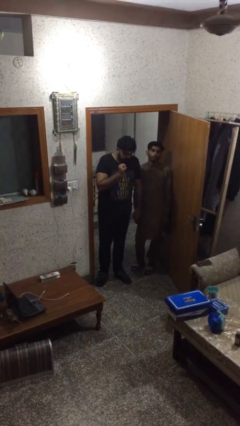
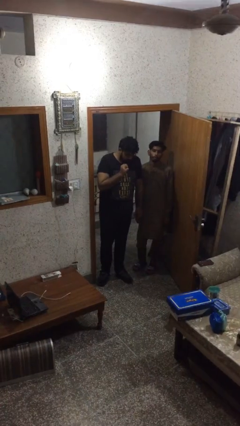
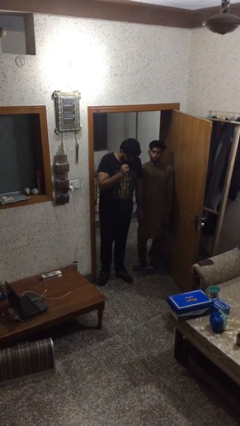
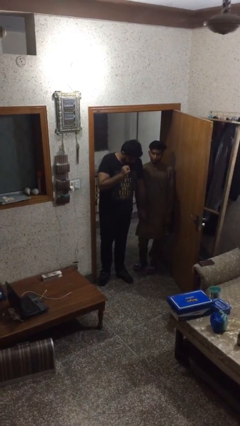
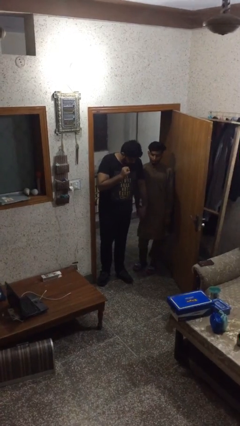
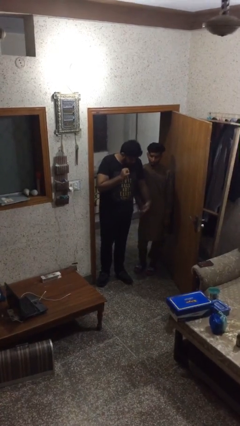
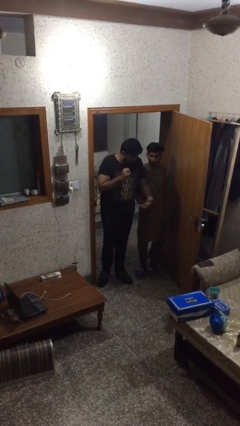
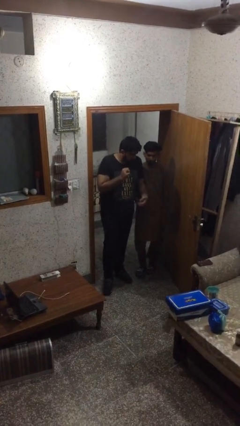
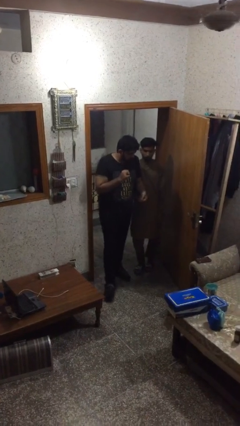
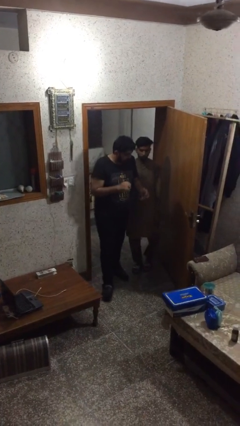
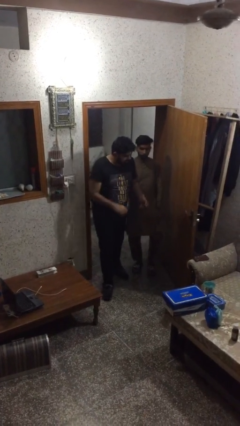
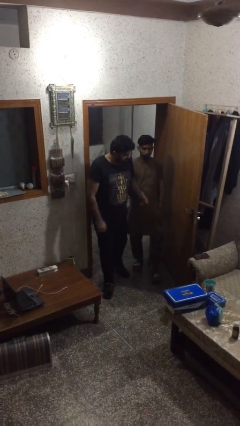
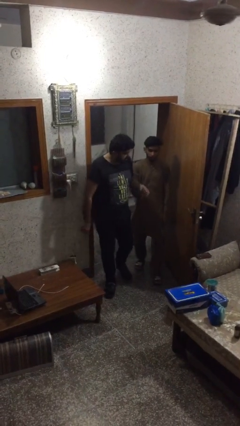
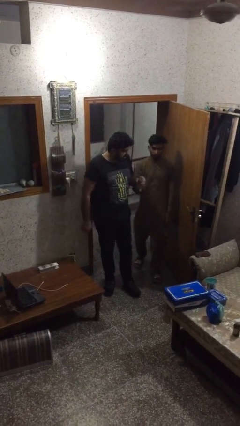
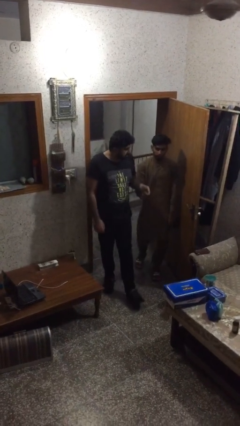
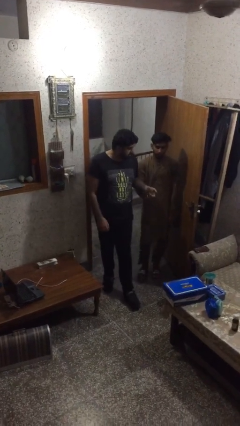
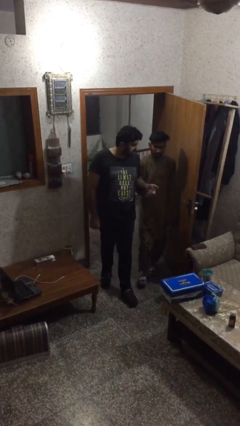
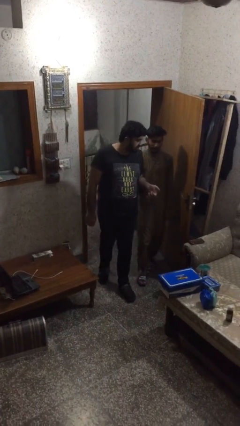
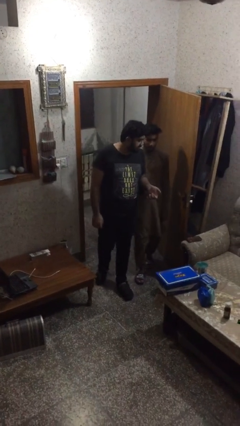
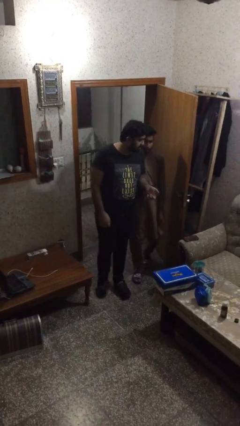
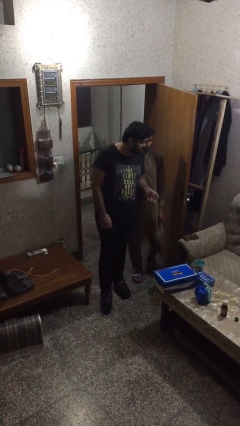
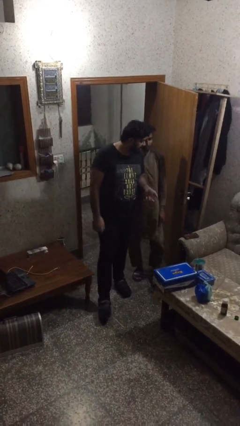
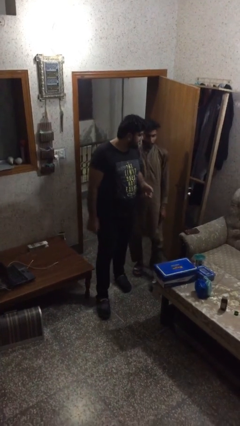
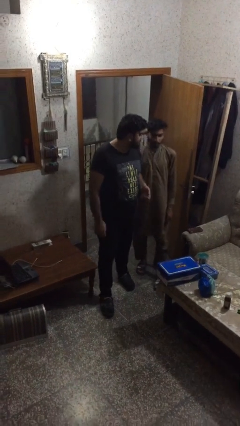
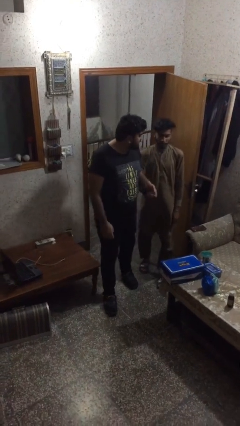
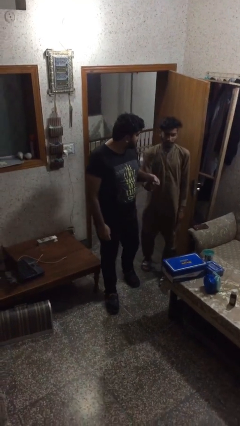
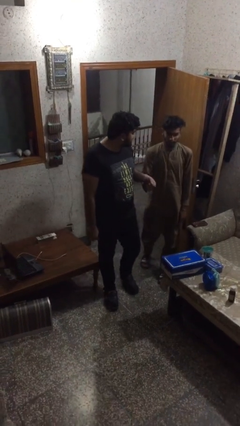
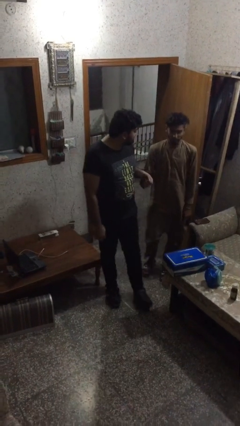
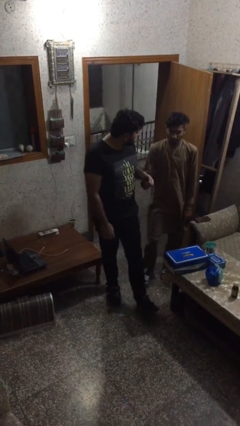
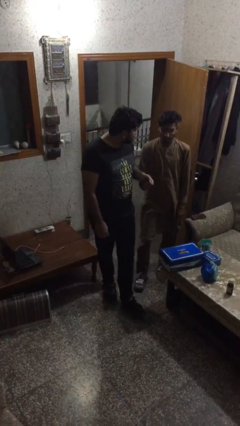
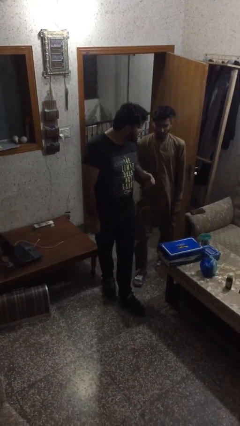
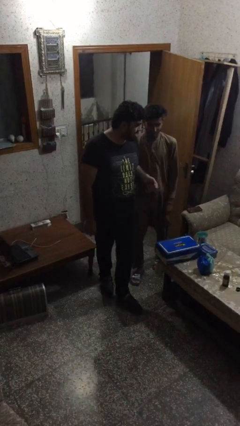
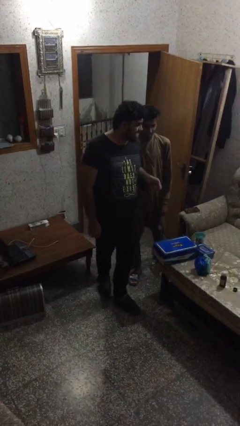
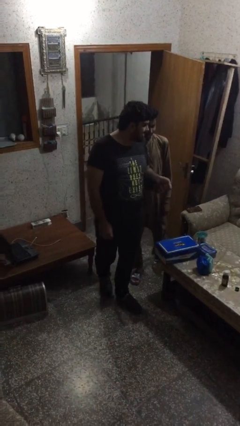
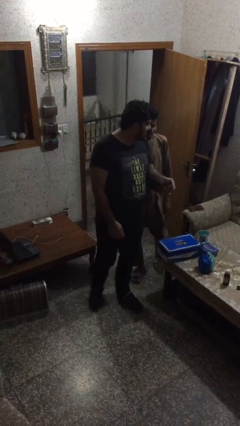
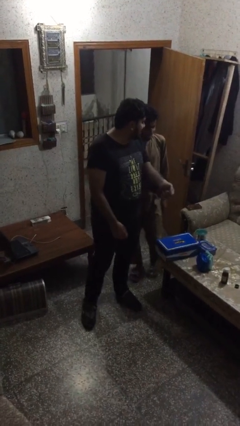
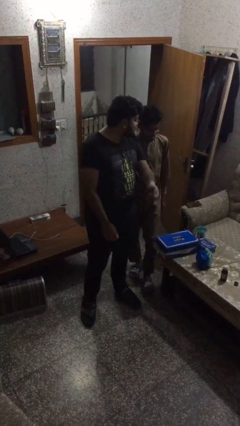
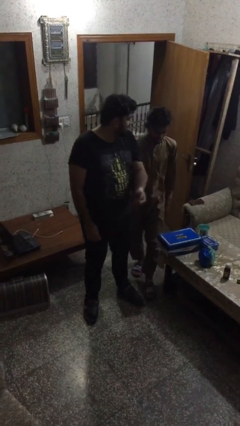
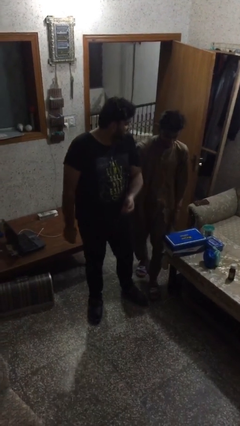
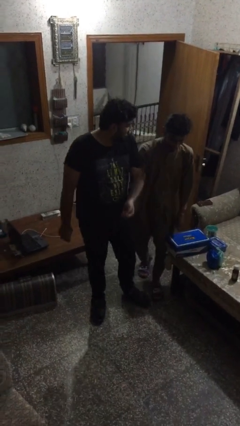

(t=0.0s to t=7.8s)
person holds hand

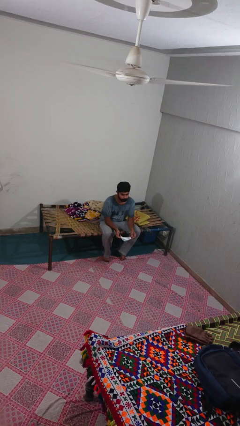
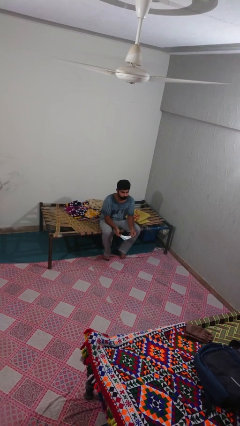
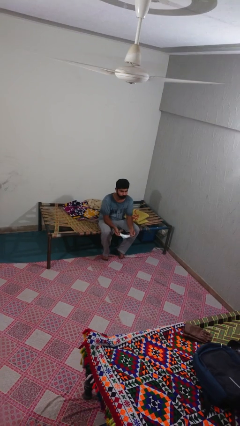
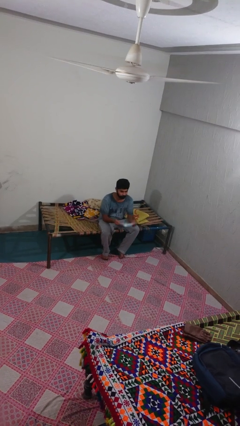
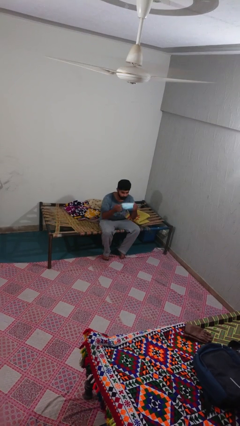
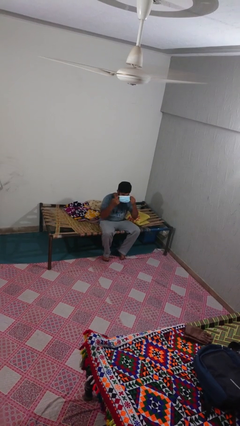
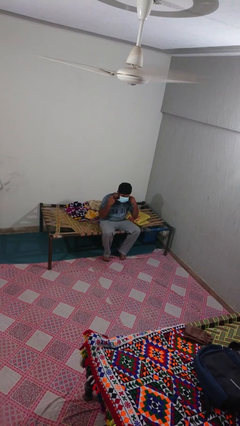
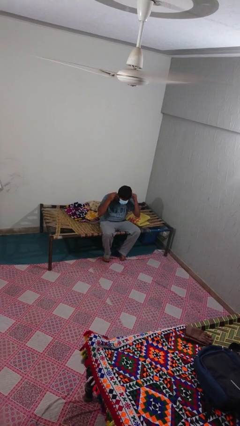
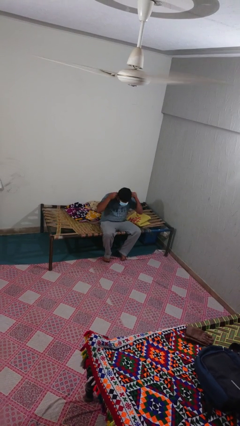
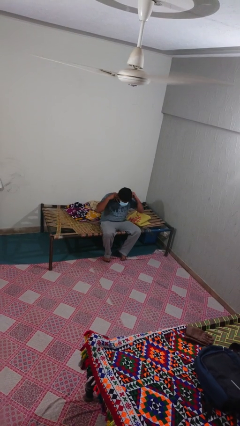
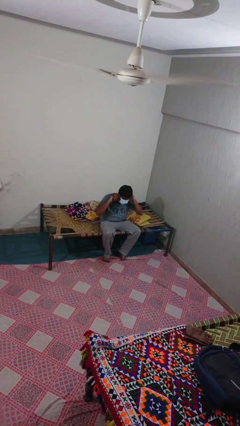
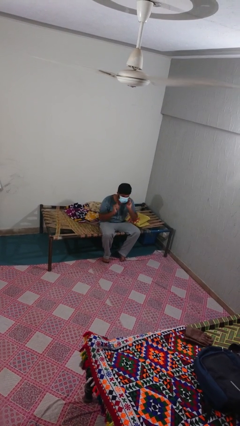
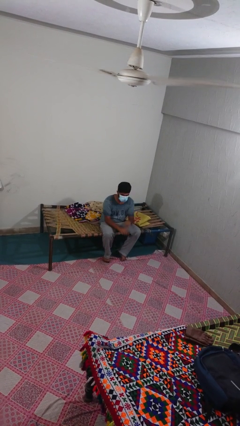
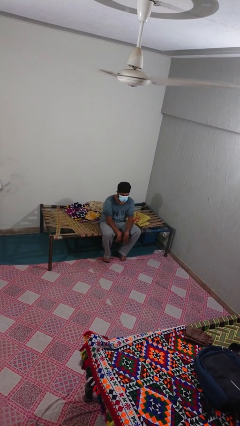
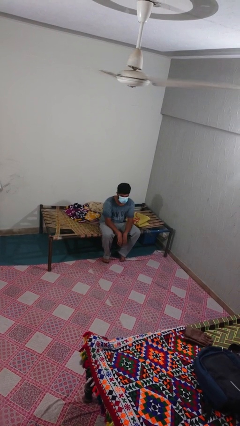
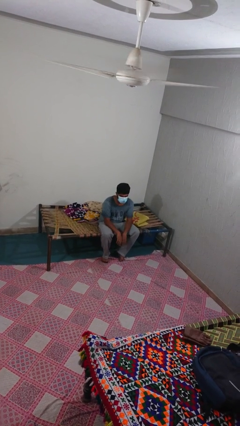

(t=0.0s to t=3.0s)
person puts on facemask

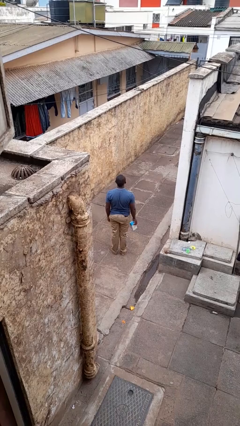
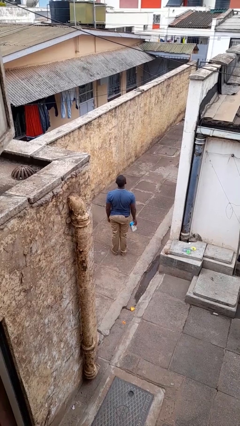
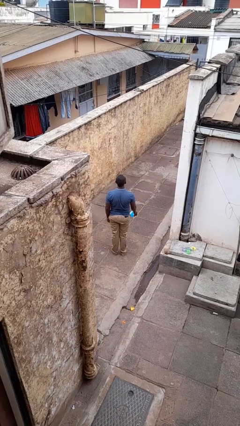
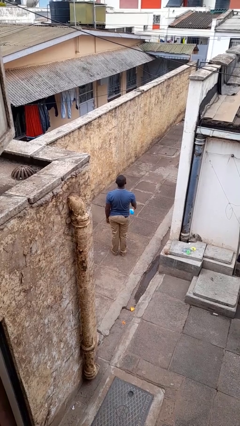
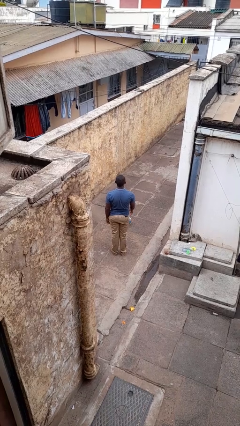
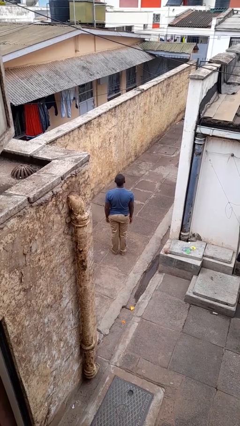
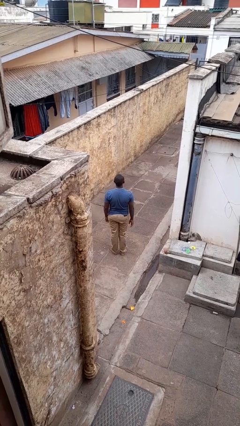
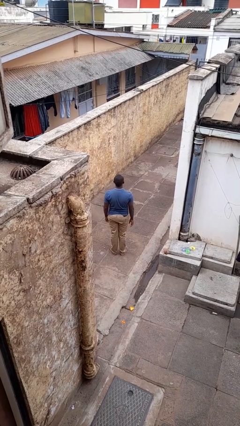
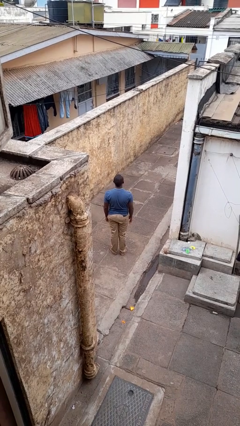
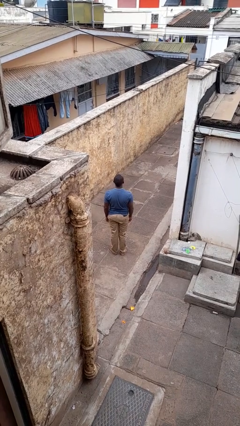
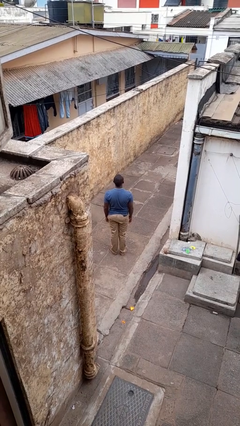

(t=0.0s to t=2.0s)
person throws object to ground

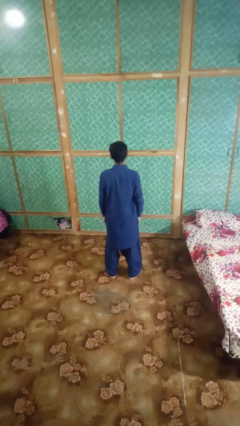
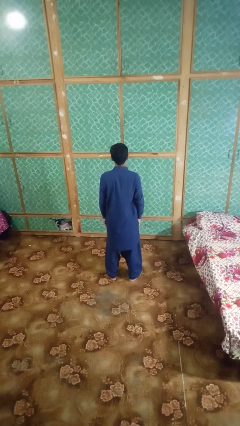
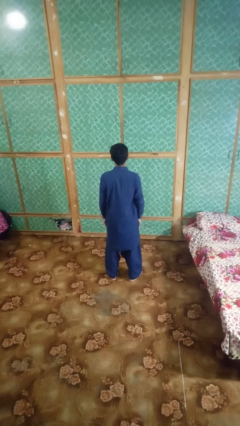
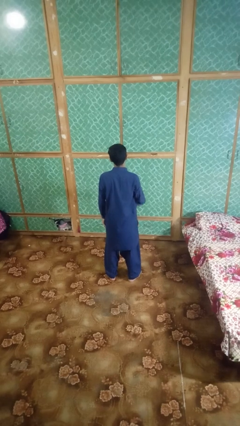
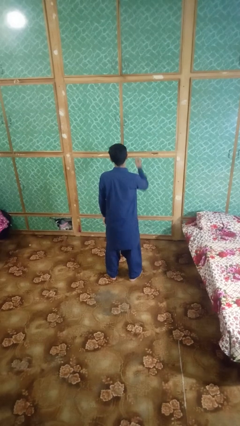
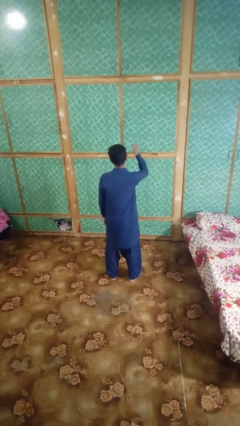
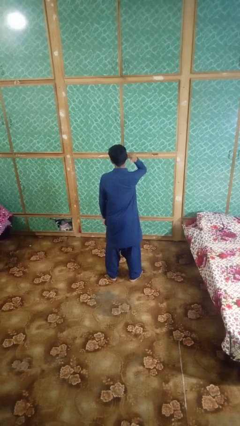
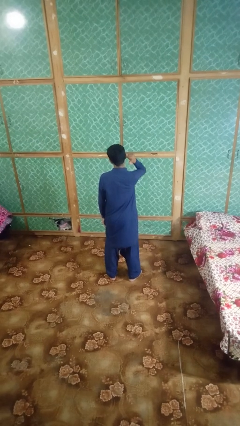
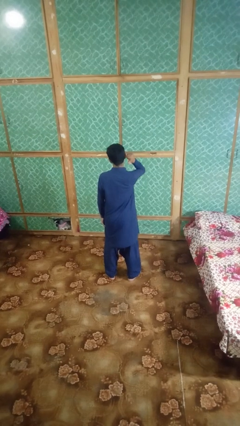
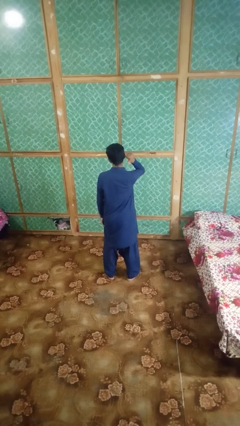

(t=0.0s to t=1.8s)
person gestures behind me

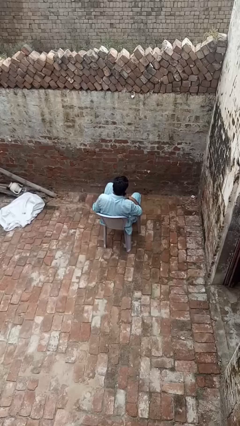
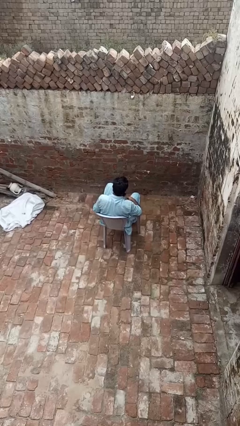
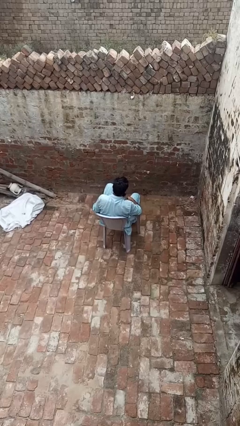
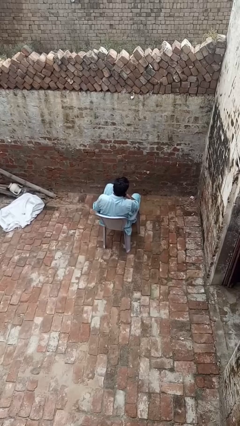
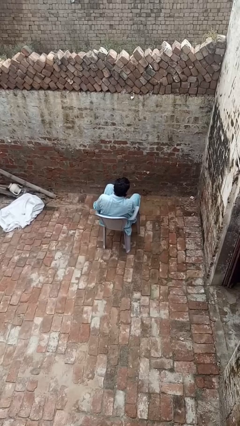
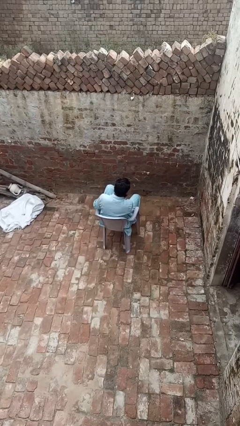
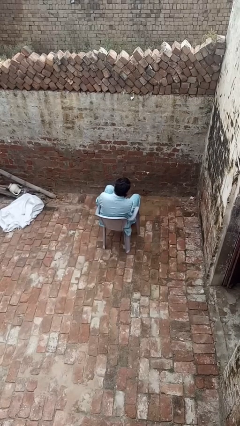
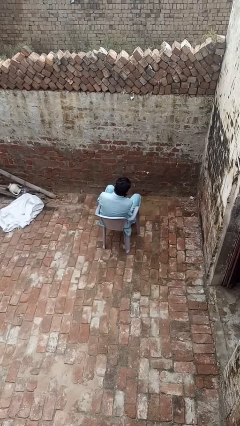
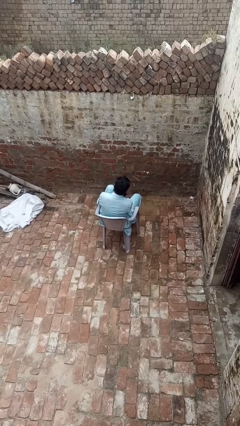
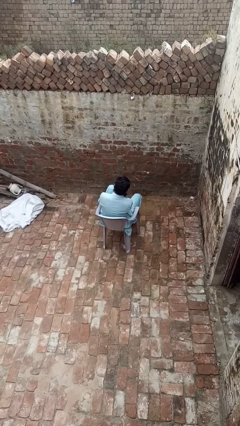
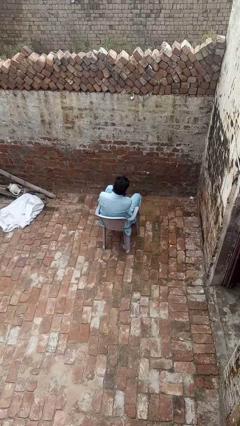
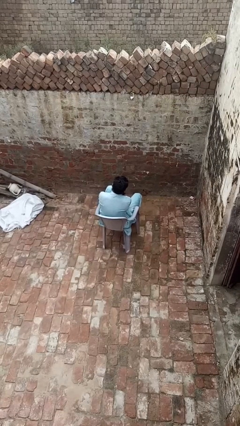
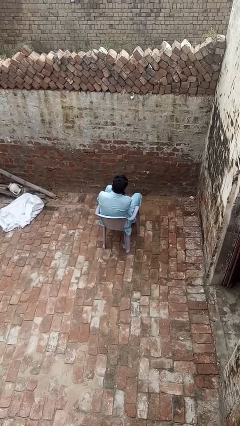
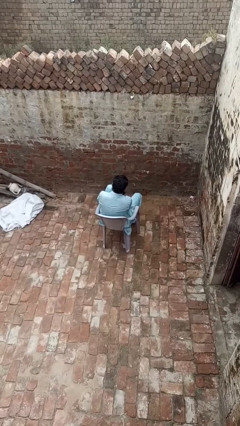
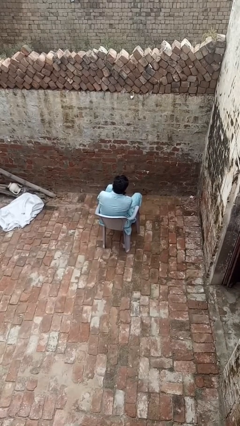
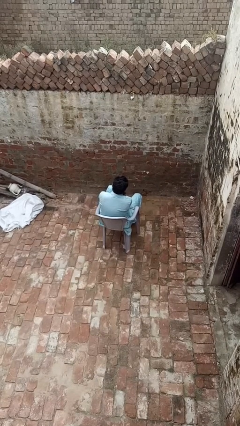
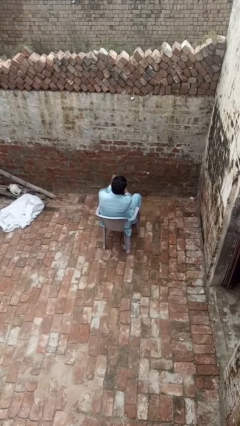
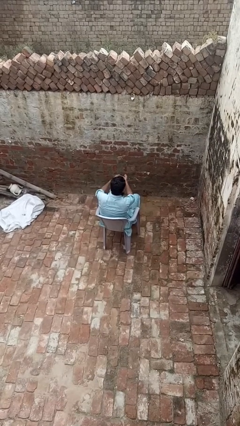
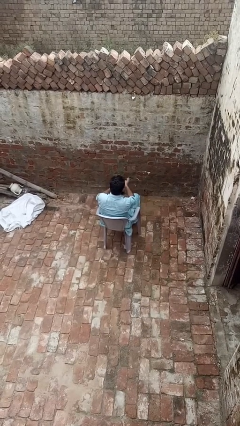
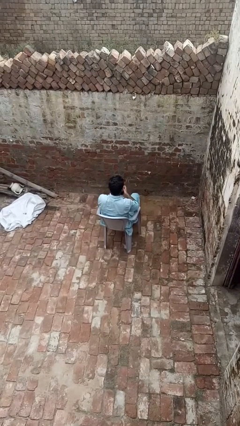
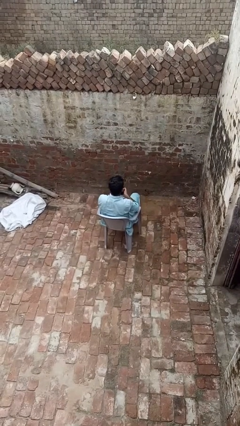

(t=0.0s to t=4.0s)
person takes off socks
